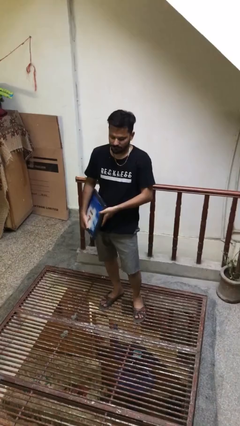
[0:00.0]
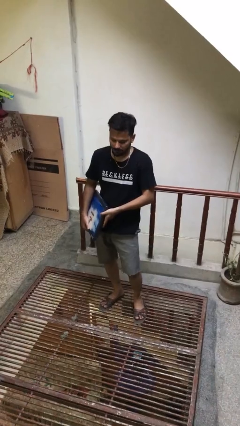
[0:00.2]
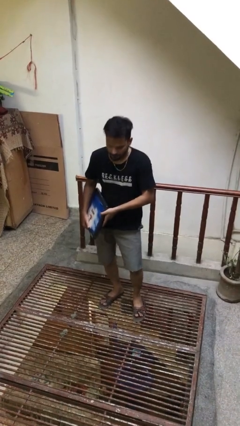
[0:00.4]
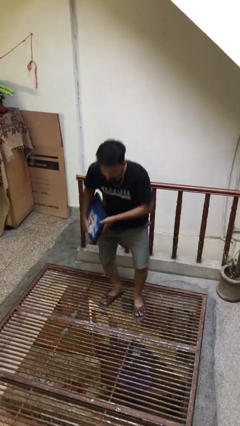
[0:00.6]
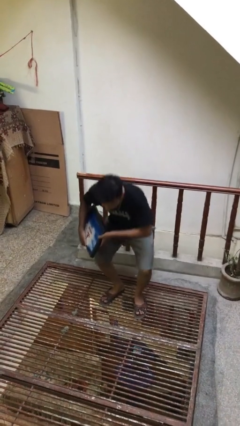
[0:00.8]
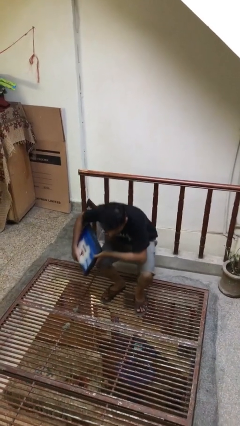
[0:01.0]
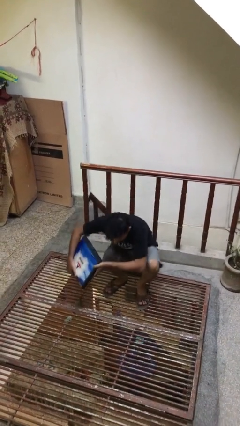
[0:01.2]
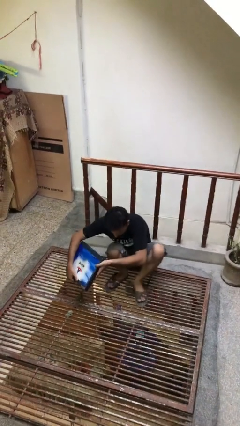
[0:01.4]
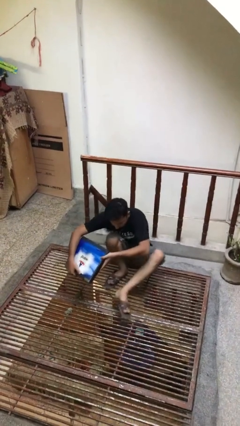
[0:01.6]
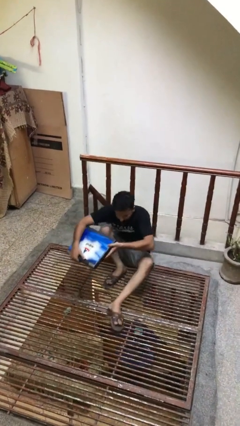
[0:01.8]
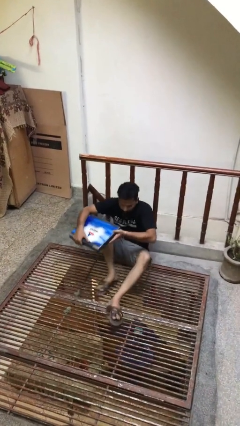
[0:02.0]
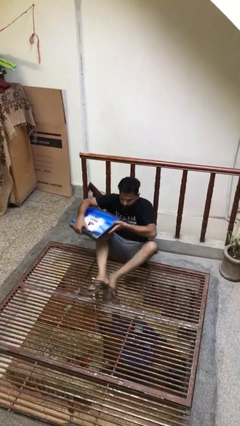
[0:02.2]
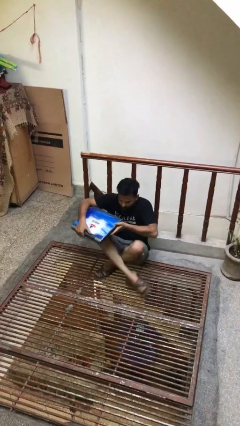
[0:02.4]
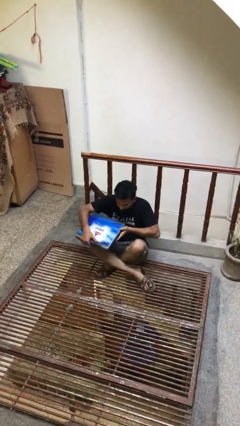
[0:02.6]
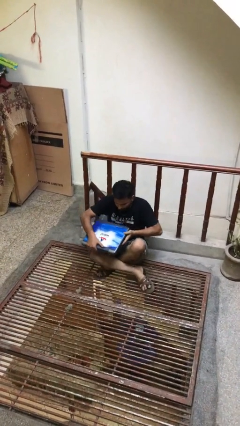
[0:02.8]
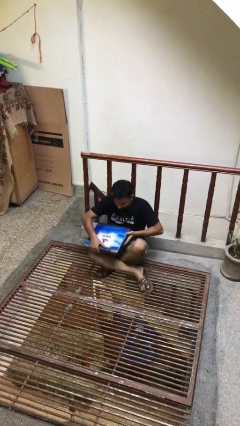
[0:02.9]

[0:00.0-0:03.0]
person sits down

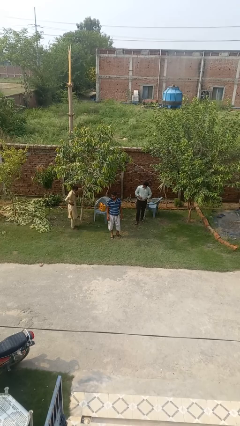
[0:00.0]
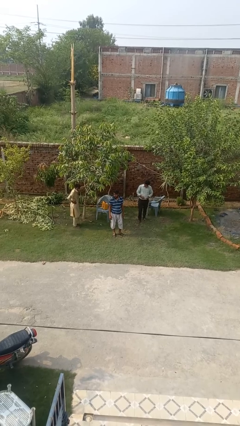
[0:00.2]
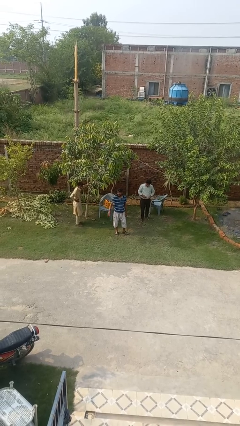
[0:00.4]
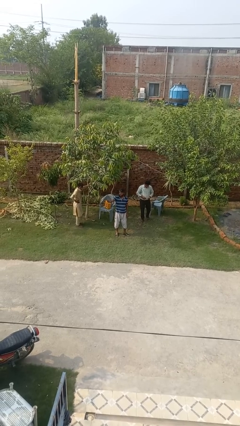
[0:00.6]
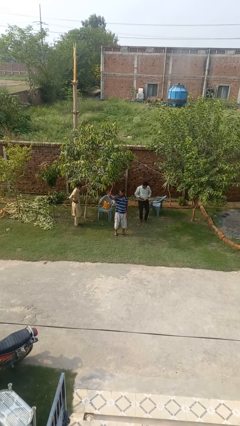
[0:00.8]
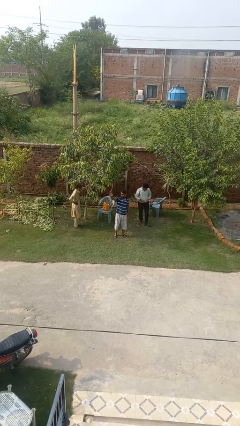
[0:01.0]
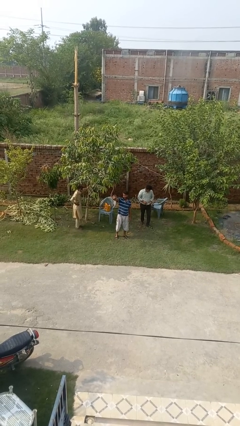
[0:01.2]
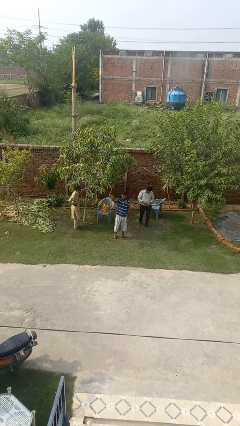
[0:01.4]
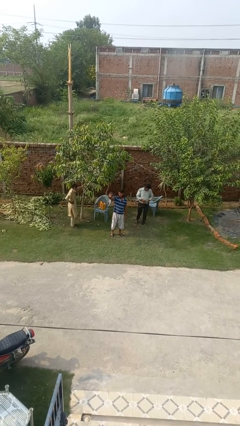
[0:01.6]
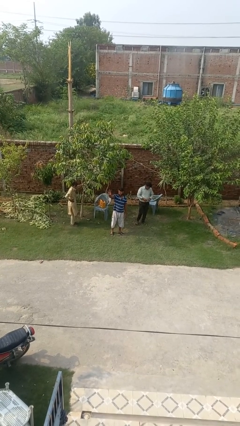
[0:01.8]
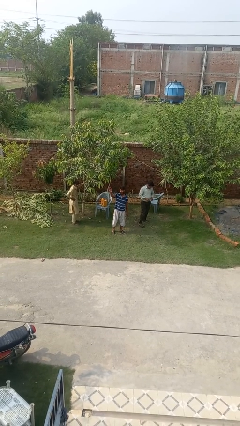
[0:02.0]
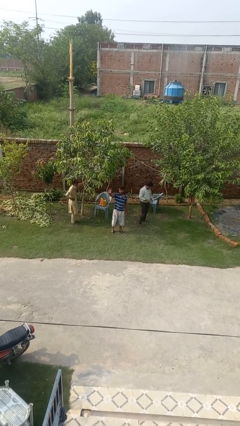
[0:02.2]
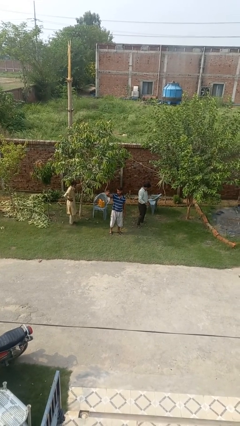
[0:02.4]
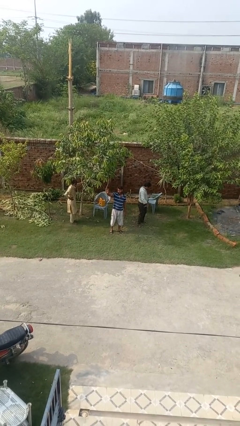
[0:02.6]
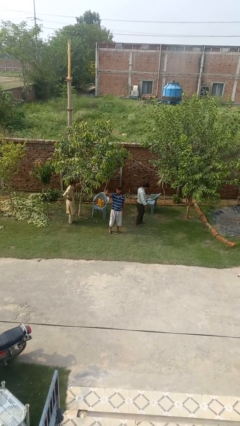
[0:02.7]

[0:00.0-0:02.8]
person waves at person

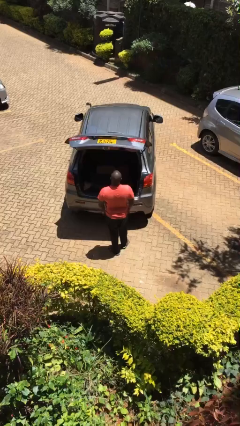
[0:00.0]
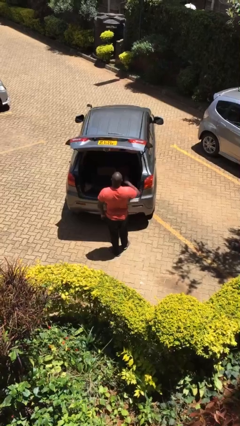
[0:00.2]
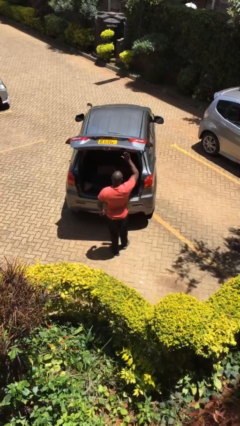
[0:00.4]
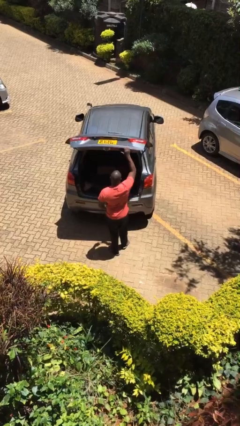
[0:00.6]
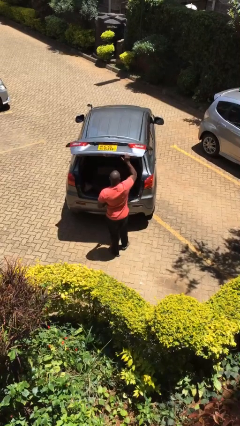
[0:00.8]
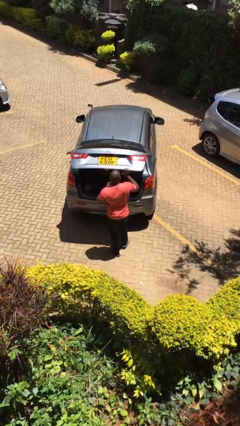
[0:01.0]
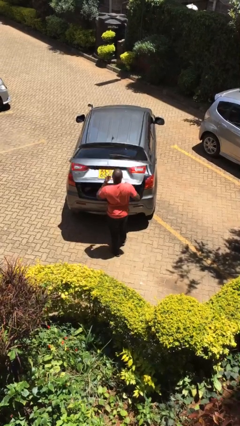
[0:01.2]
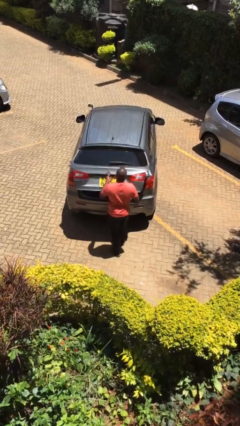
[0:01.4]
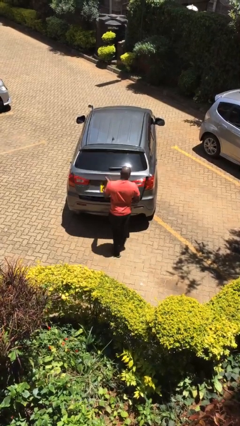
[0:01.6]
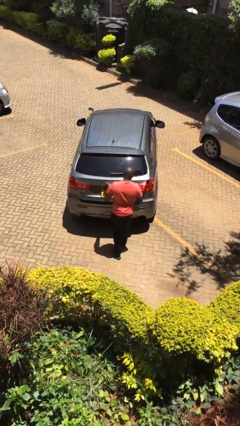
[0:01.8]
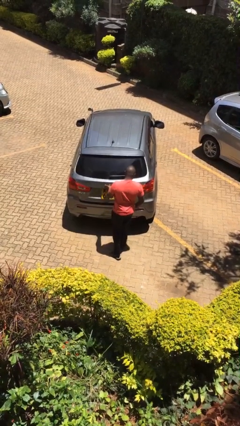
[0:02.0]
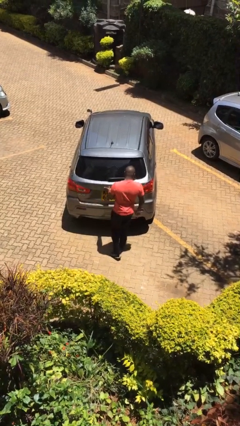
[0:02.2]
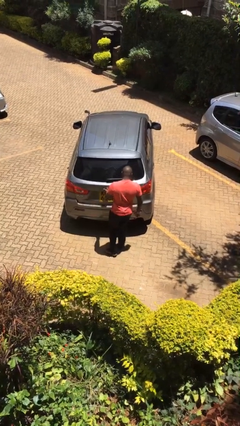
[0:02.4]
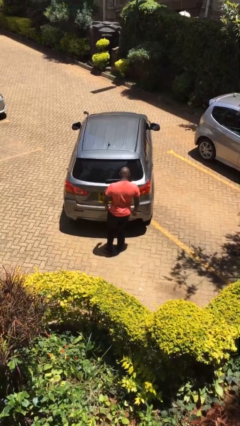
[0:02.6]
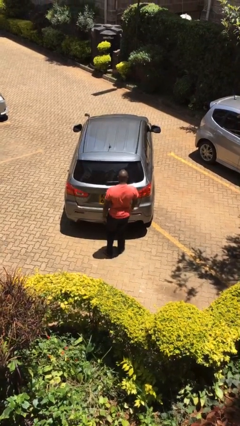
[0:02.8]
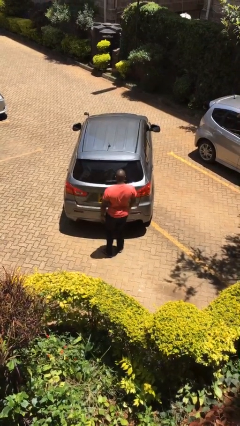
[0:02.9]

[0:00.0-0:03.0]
person closes car trunk

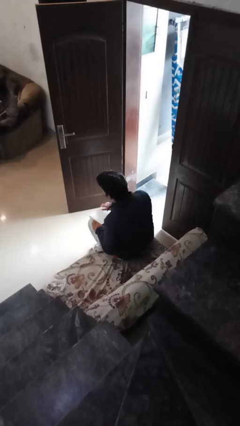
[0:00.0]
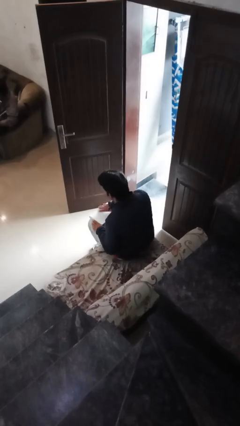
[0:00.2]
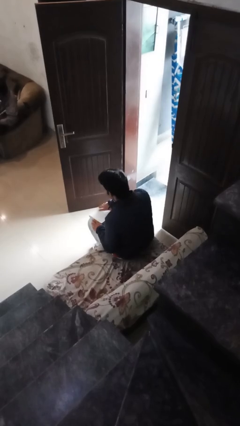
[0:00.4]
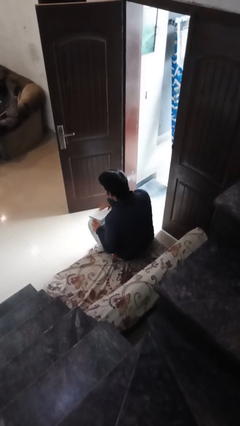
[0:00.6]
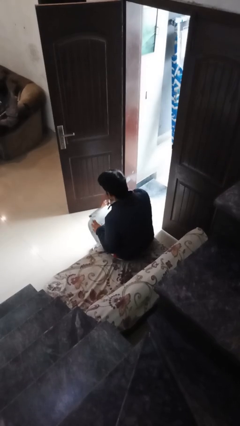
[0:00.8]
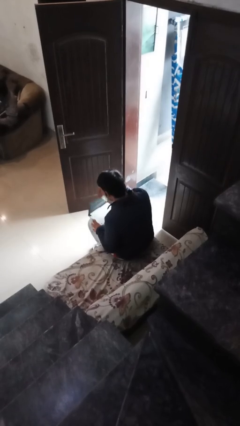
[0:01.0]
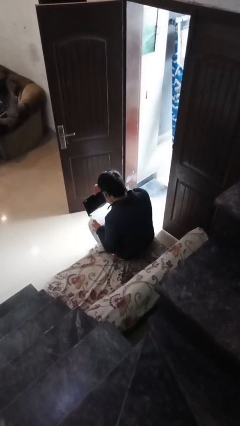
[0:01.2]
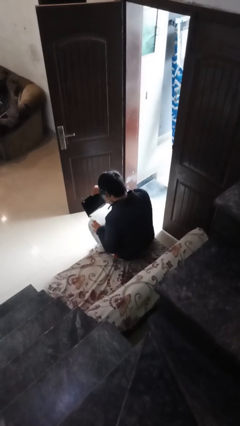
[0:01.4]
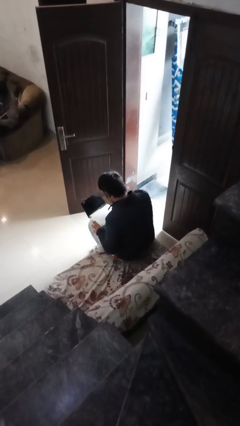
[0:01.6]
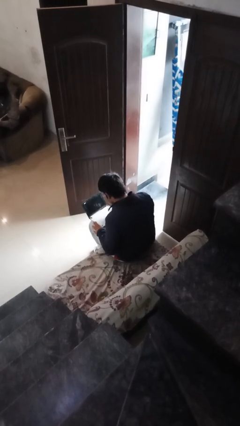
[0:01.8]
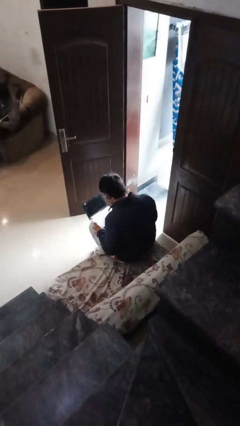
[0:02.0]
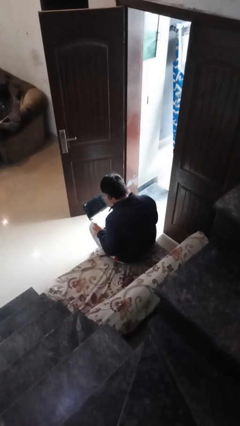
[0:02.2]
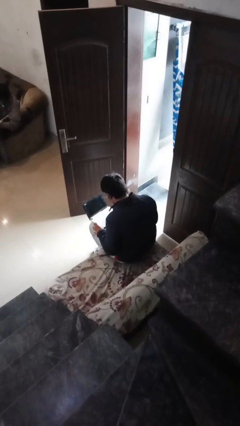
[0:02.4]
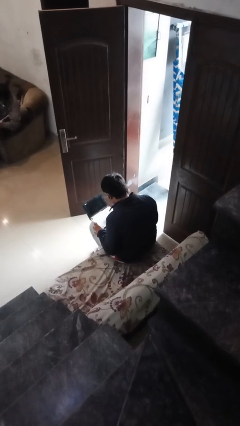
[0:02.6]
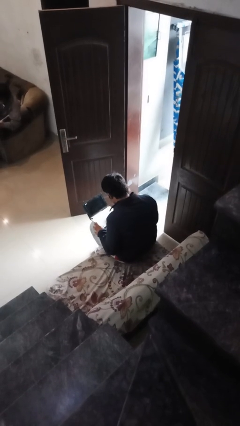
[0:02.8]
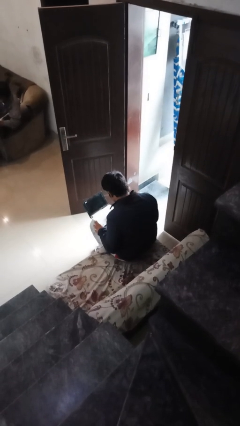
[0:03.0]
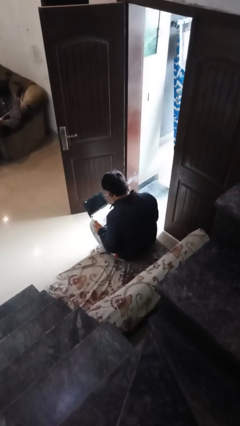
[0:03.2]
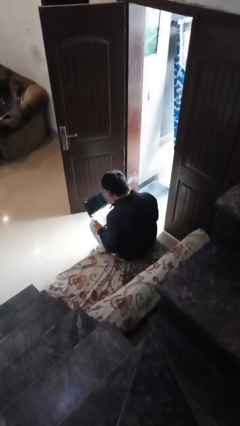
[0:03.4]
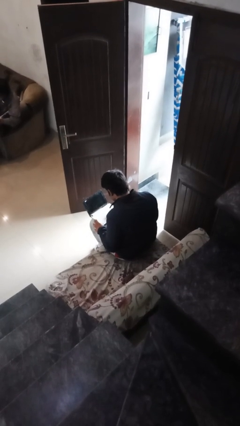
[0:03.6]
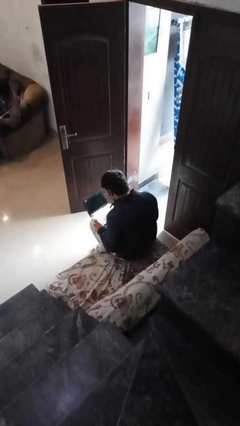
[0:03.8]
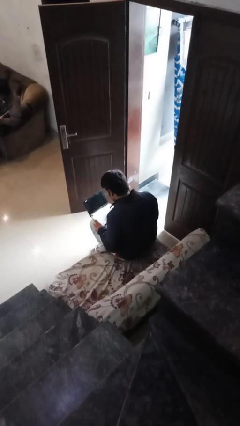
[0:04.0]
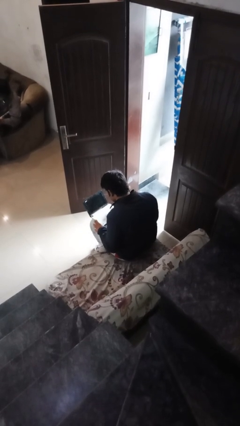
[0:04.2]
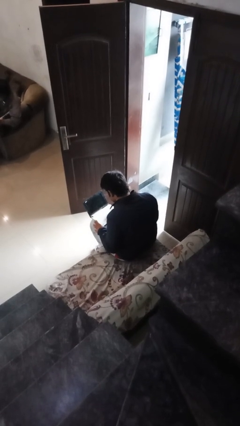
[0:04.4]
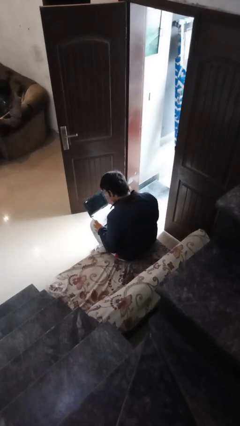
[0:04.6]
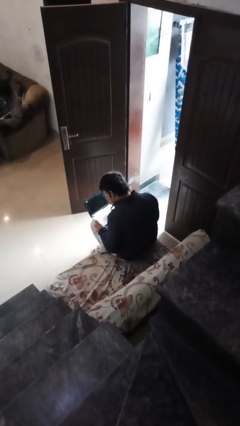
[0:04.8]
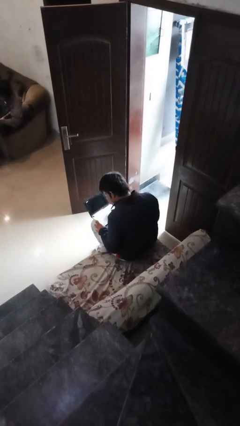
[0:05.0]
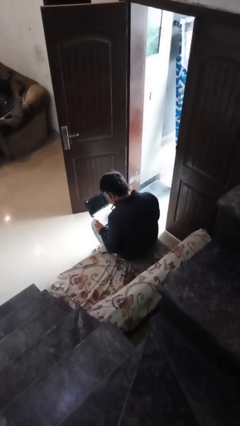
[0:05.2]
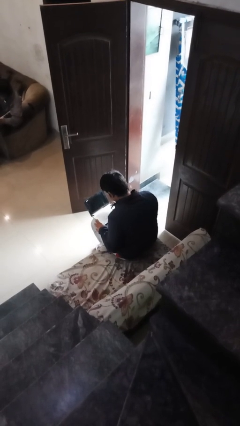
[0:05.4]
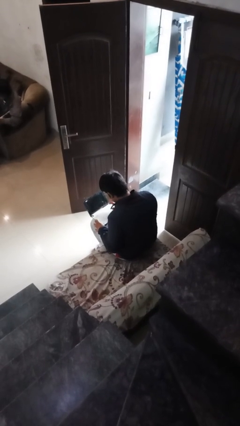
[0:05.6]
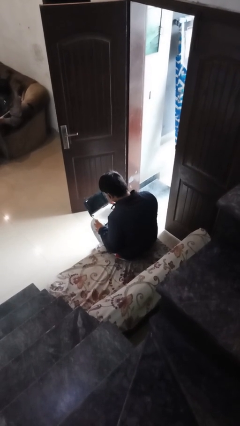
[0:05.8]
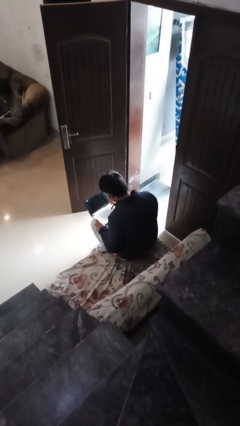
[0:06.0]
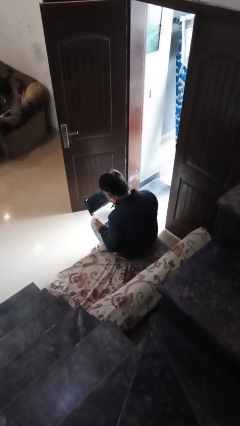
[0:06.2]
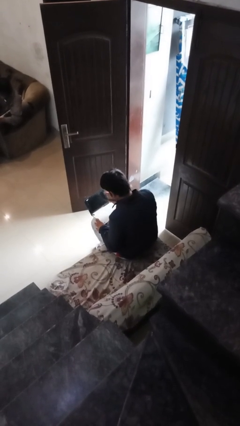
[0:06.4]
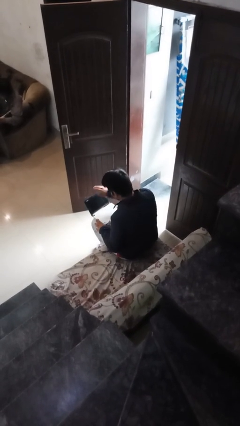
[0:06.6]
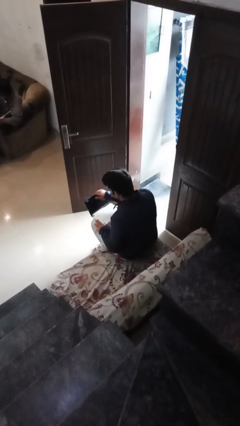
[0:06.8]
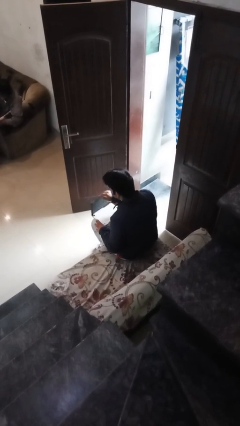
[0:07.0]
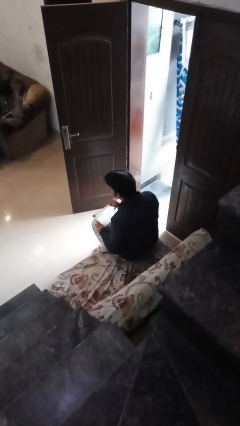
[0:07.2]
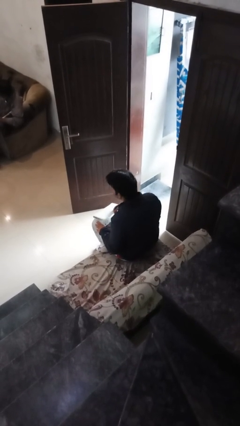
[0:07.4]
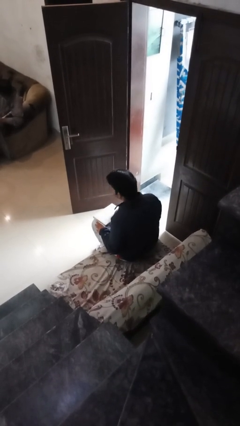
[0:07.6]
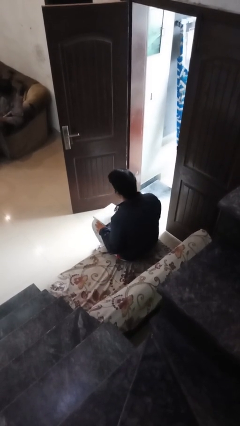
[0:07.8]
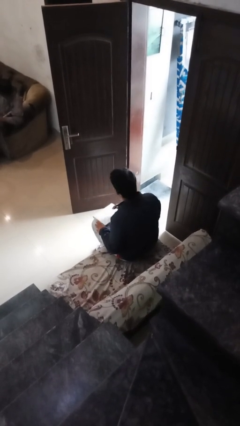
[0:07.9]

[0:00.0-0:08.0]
person interacts with laptop

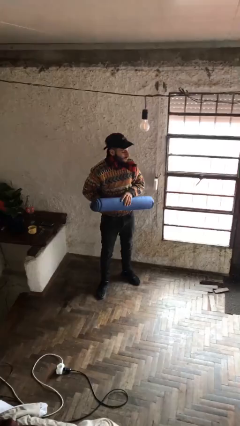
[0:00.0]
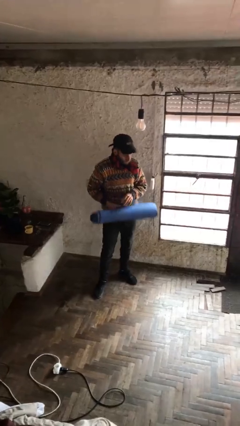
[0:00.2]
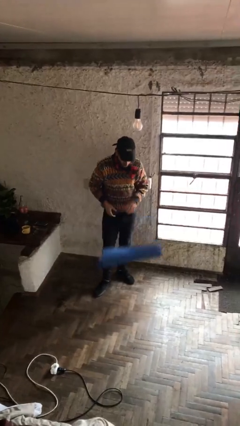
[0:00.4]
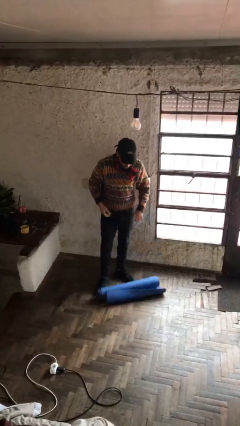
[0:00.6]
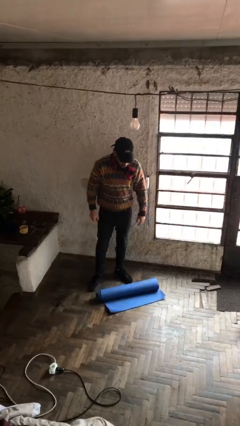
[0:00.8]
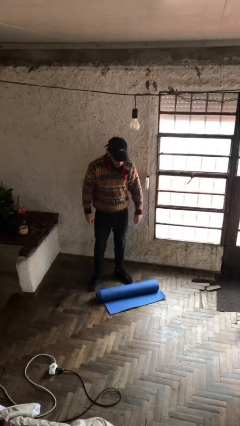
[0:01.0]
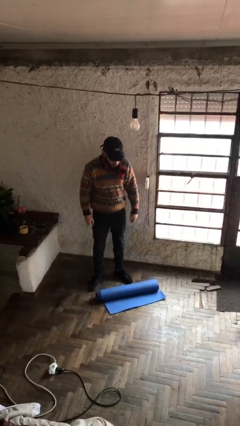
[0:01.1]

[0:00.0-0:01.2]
person drops object
